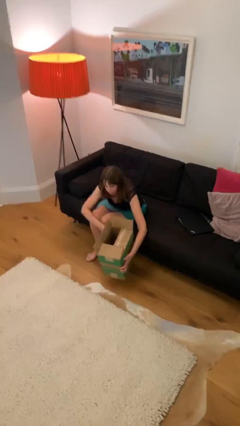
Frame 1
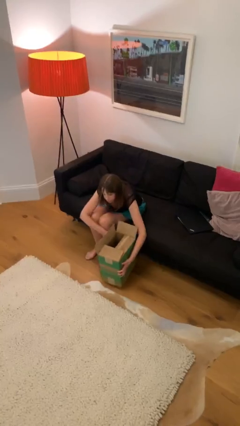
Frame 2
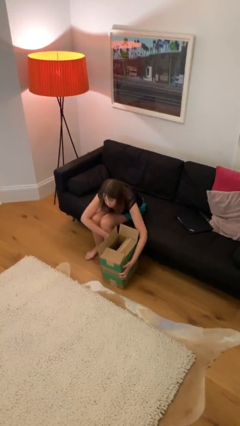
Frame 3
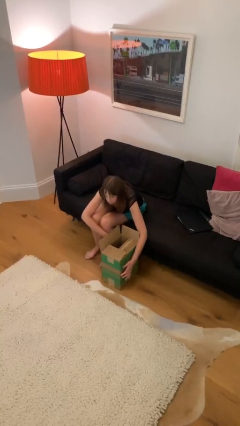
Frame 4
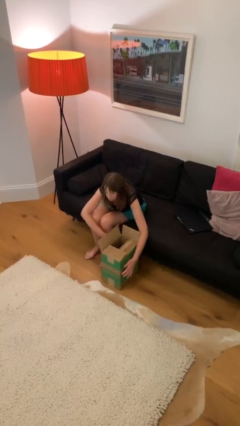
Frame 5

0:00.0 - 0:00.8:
person puts down object on floor

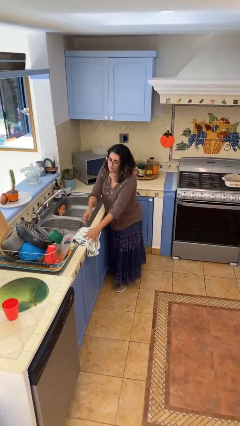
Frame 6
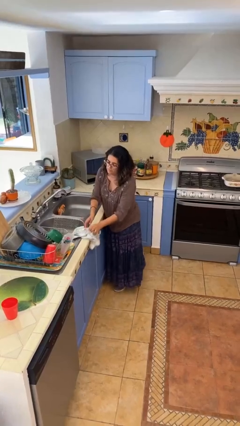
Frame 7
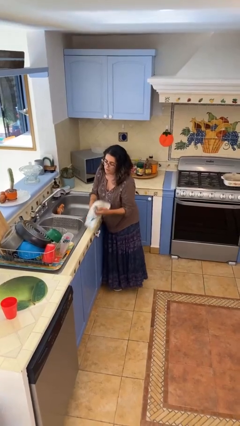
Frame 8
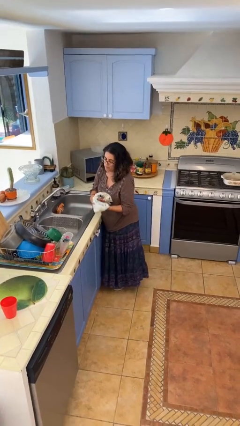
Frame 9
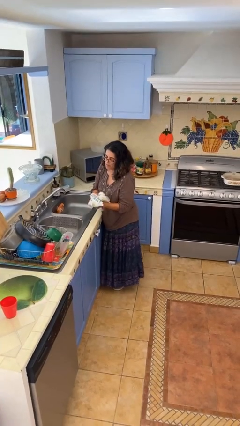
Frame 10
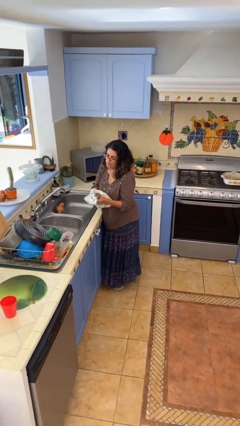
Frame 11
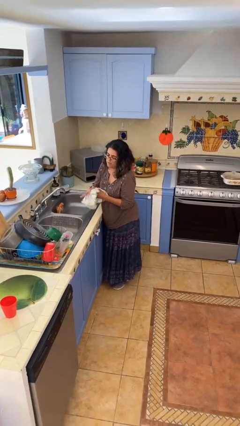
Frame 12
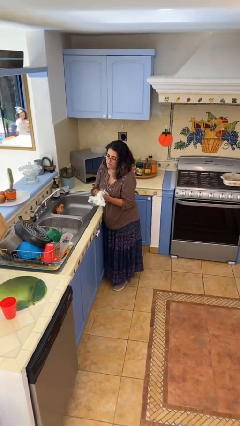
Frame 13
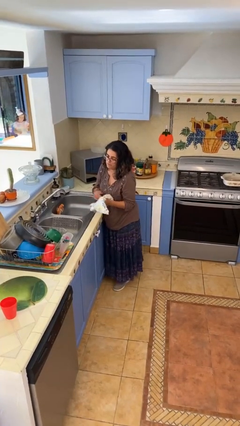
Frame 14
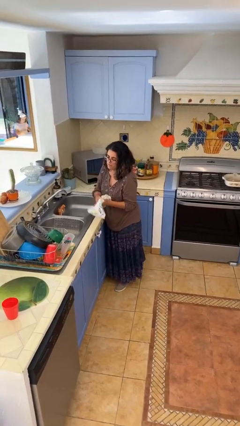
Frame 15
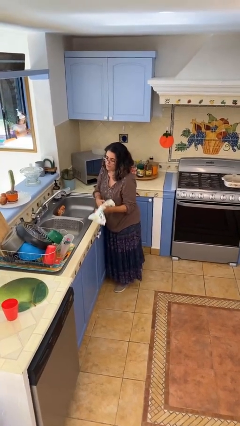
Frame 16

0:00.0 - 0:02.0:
person dries hands with towel

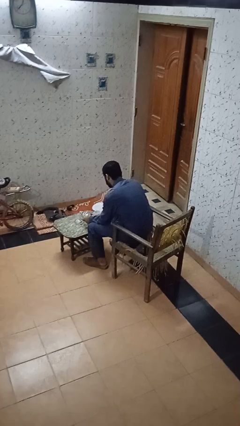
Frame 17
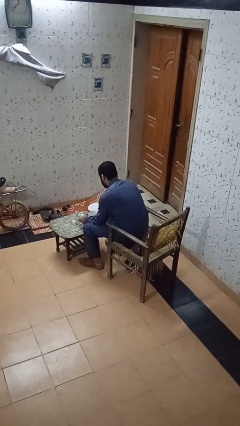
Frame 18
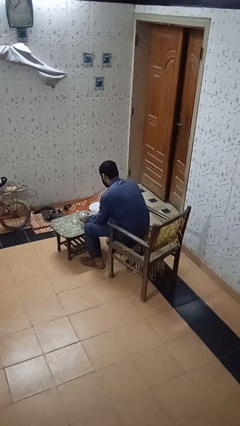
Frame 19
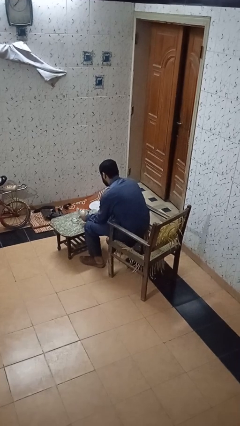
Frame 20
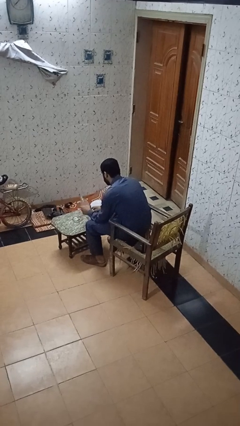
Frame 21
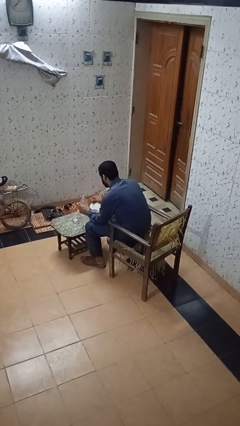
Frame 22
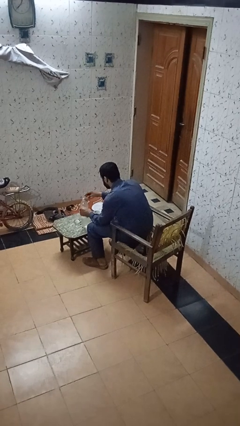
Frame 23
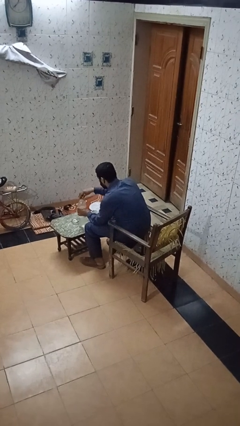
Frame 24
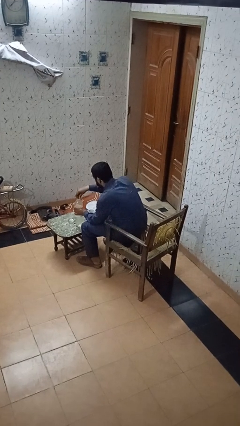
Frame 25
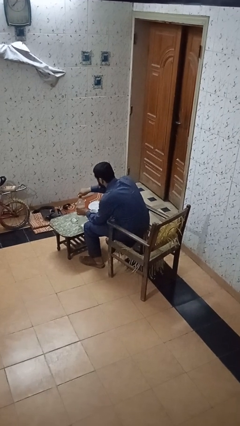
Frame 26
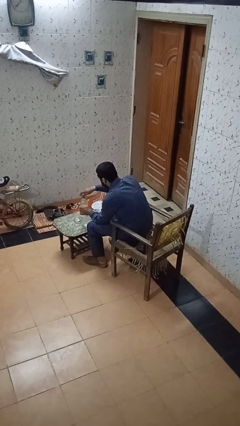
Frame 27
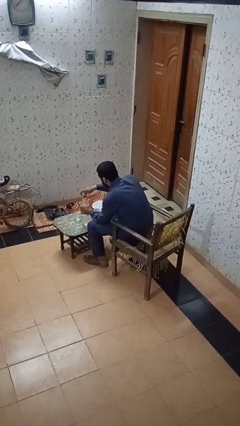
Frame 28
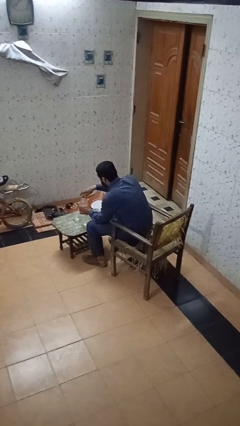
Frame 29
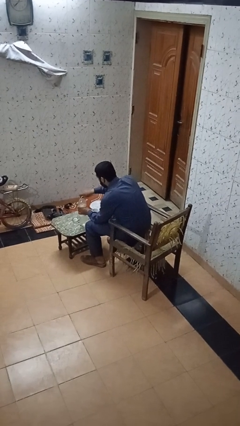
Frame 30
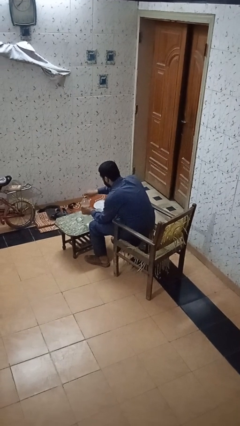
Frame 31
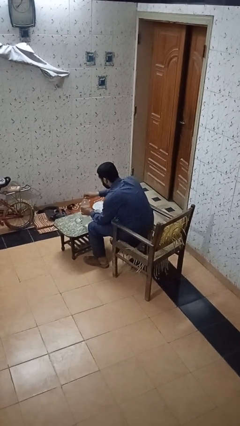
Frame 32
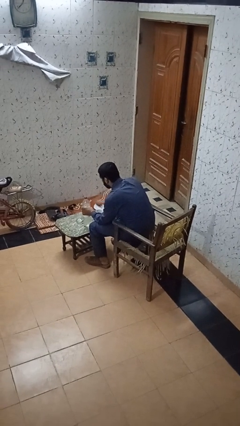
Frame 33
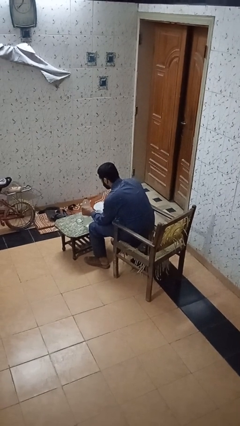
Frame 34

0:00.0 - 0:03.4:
person screws lid to bottle

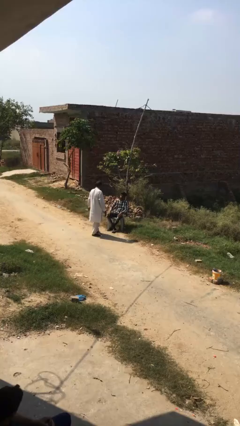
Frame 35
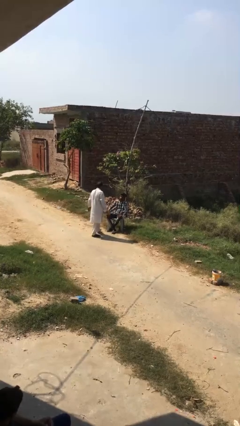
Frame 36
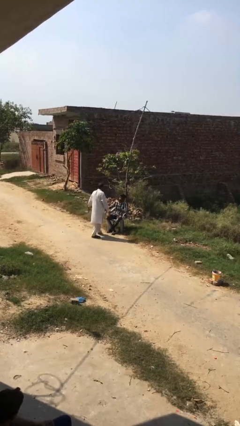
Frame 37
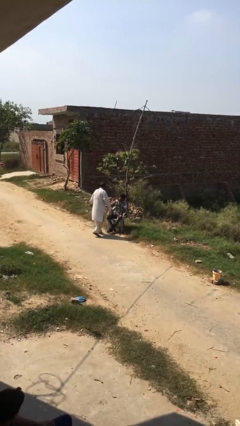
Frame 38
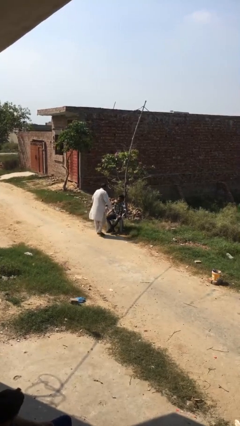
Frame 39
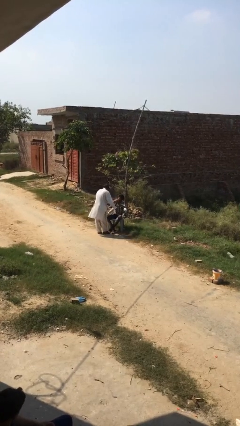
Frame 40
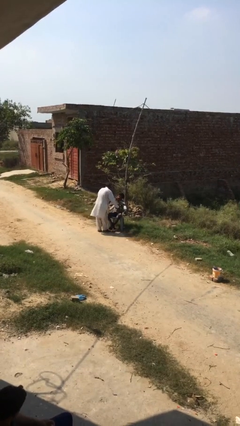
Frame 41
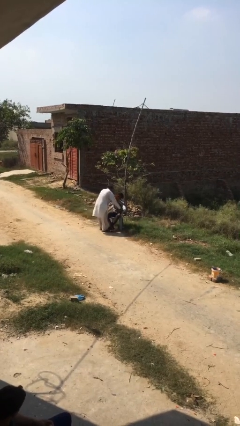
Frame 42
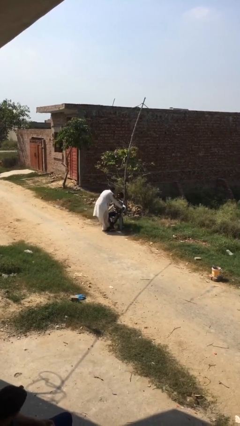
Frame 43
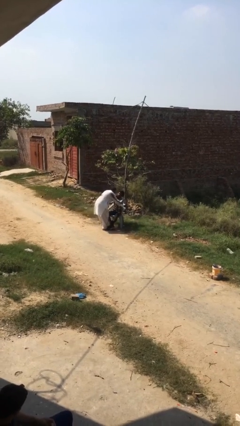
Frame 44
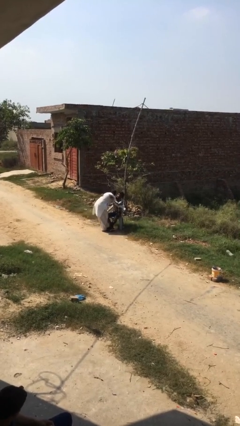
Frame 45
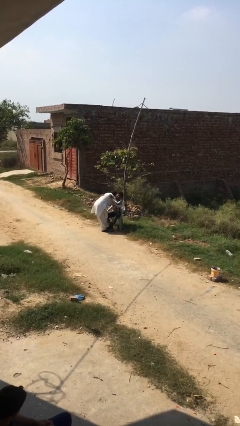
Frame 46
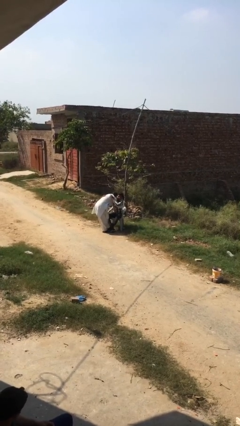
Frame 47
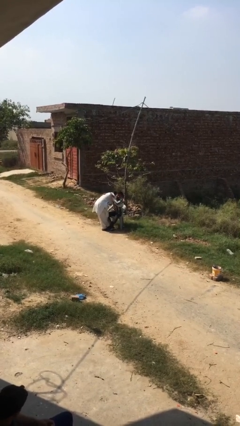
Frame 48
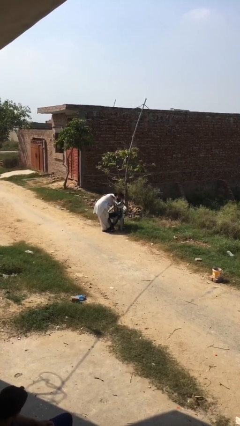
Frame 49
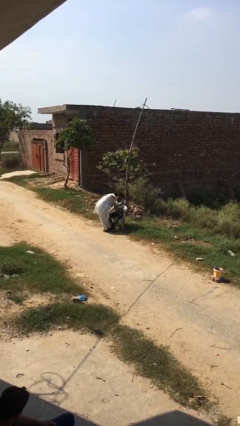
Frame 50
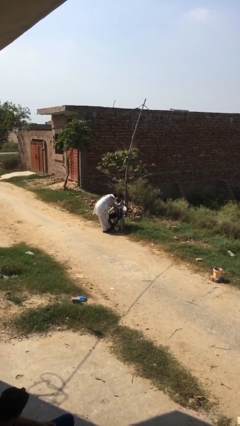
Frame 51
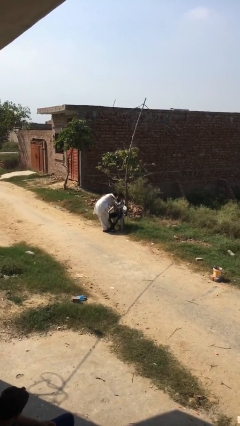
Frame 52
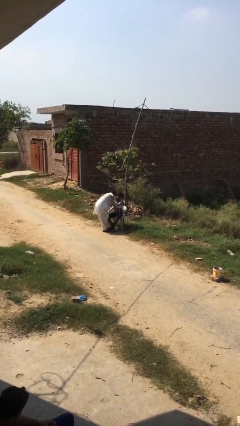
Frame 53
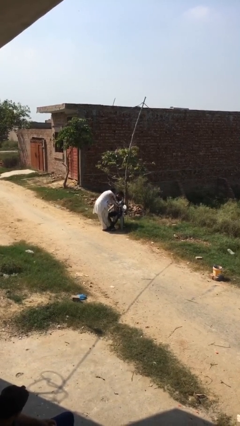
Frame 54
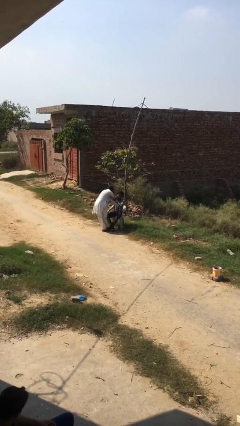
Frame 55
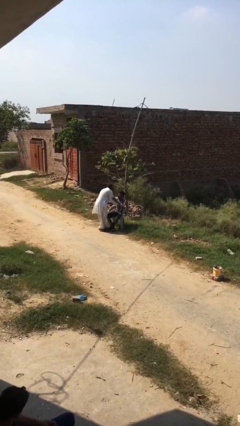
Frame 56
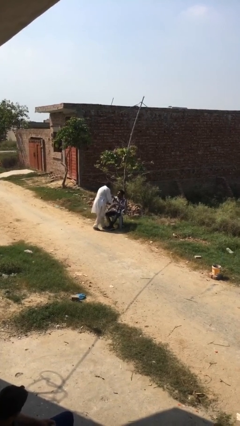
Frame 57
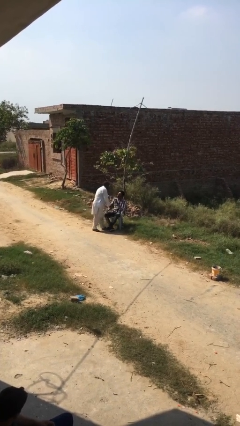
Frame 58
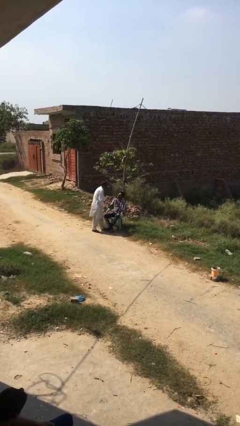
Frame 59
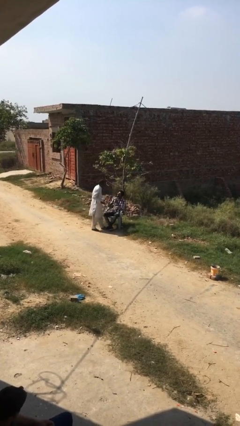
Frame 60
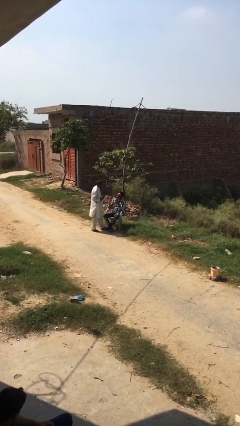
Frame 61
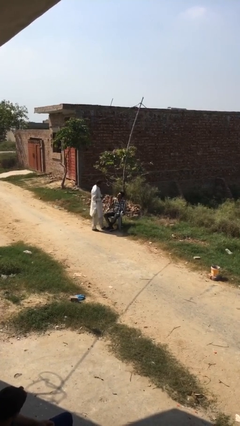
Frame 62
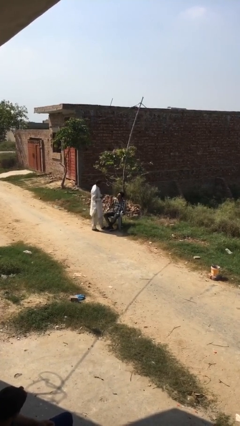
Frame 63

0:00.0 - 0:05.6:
person embraces person

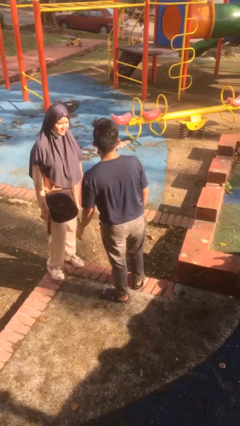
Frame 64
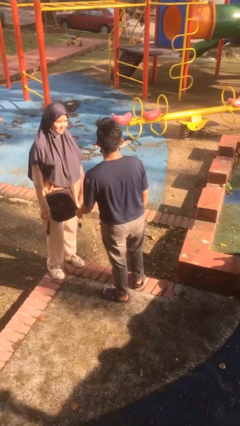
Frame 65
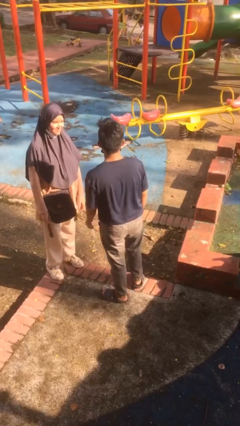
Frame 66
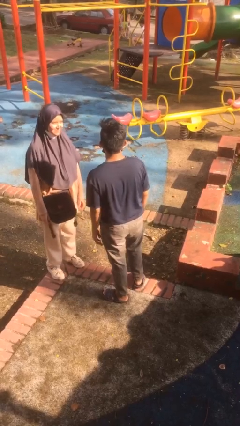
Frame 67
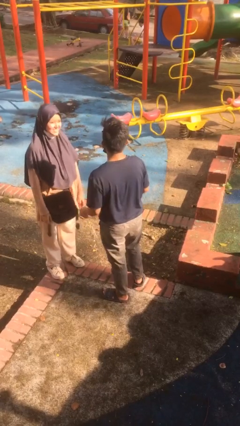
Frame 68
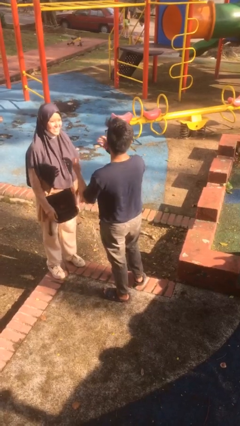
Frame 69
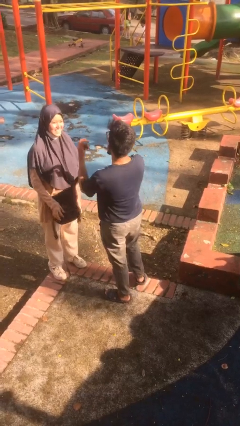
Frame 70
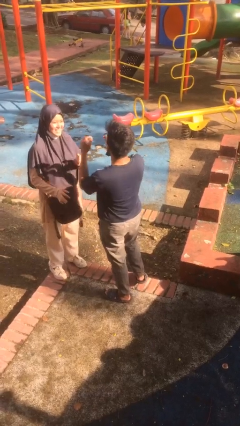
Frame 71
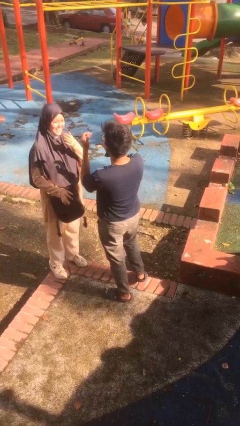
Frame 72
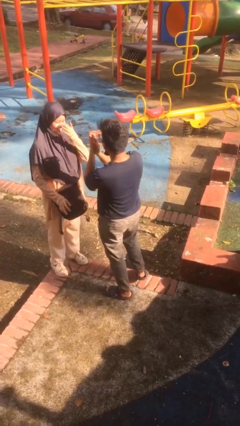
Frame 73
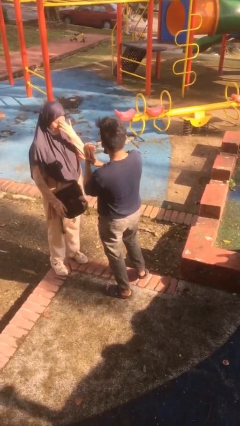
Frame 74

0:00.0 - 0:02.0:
person laughs with person

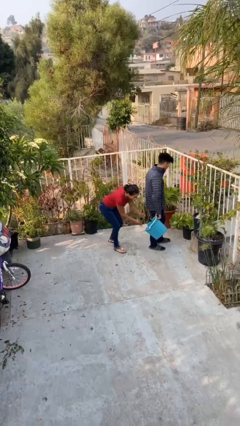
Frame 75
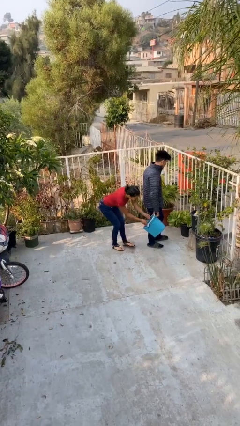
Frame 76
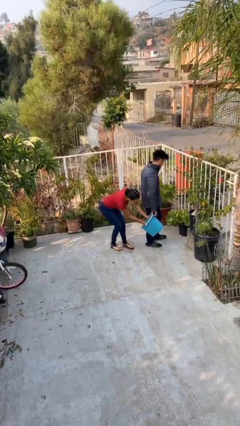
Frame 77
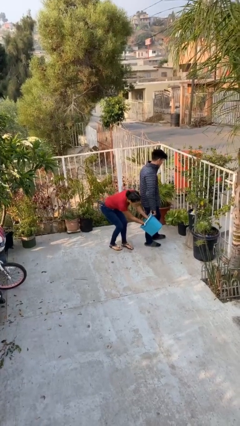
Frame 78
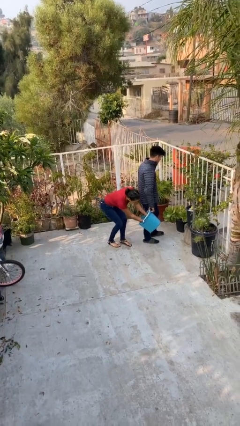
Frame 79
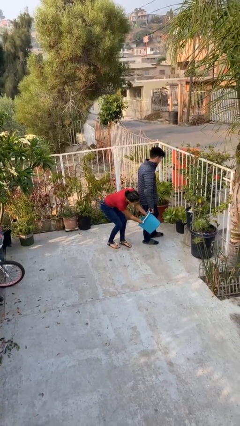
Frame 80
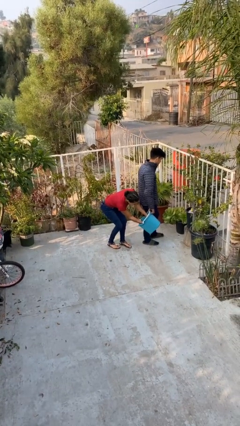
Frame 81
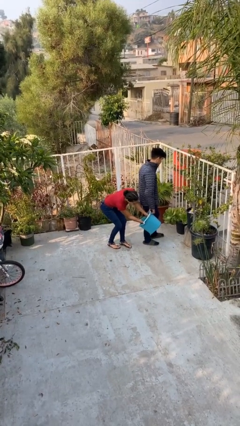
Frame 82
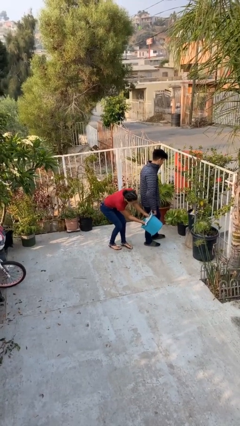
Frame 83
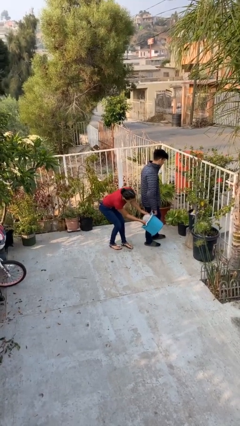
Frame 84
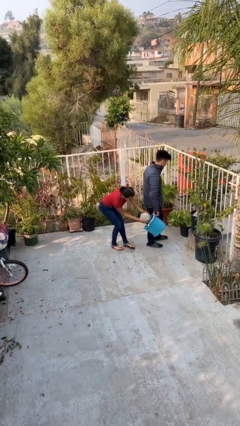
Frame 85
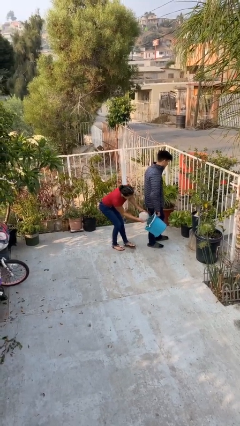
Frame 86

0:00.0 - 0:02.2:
person steals object from person

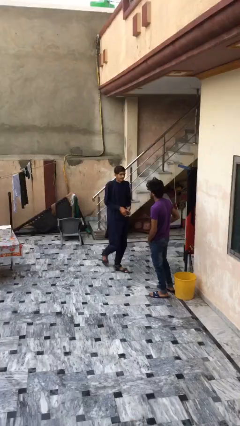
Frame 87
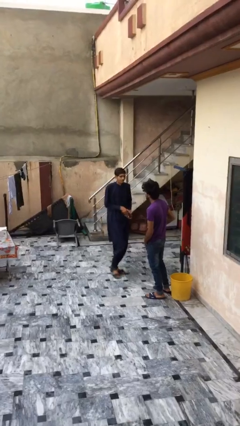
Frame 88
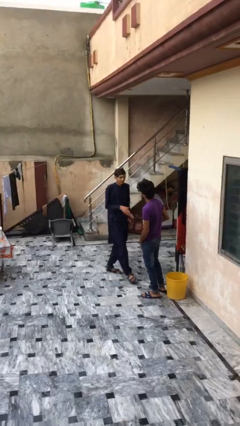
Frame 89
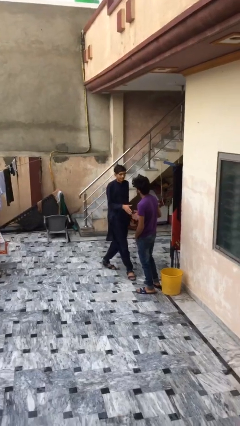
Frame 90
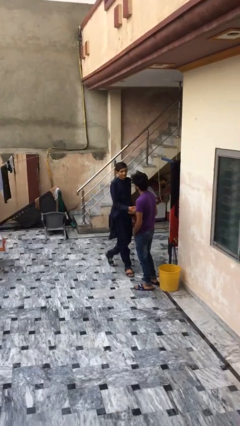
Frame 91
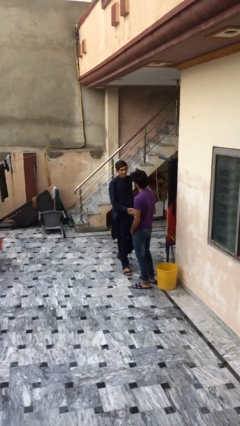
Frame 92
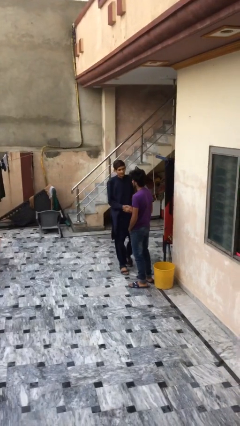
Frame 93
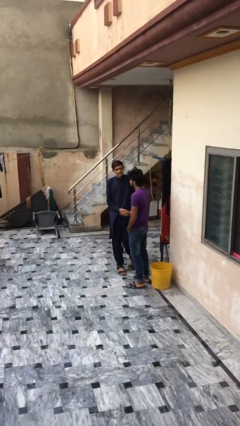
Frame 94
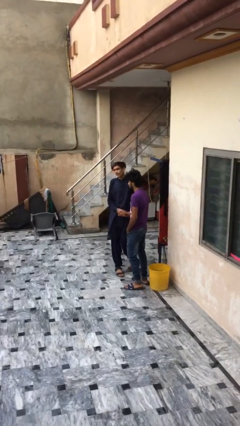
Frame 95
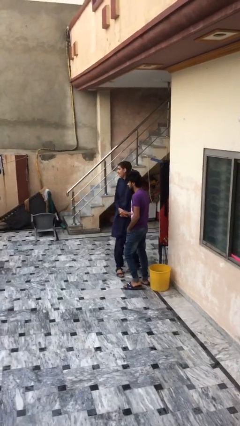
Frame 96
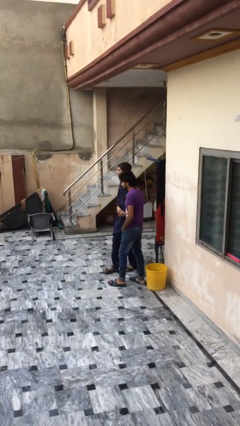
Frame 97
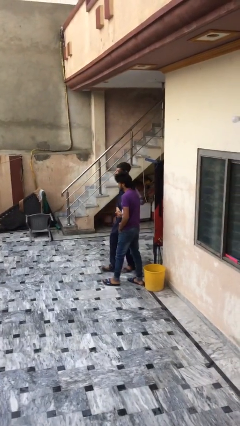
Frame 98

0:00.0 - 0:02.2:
person shakes hand
